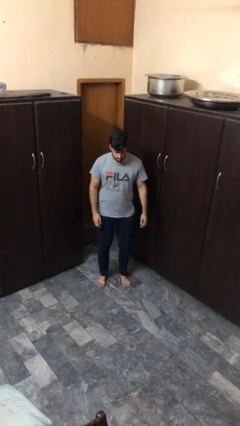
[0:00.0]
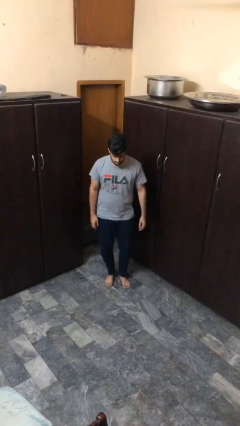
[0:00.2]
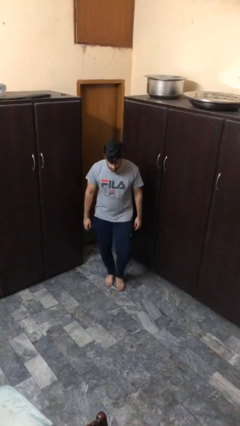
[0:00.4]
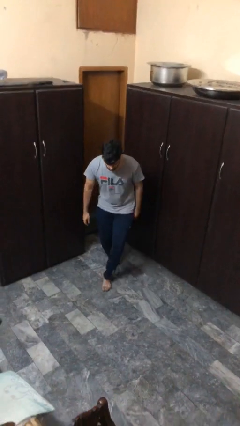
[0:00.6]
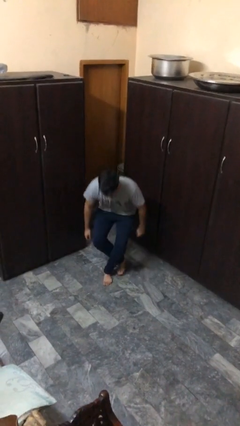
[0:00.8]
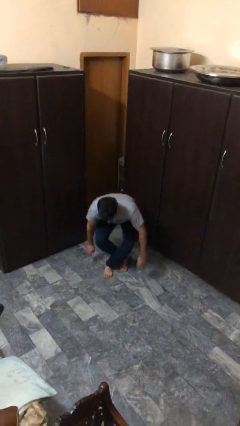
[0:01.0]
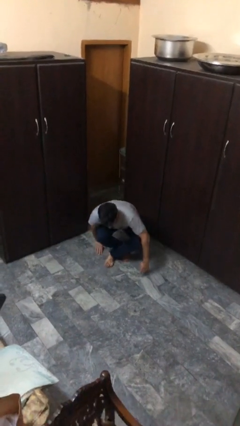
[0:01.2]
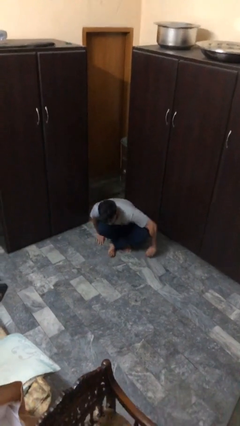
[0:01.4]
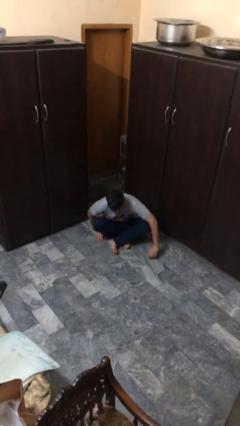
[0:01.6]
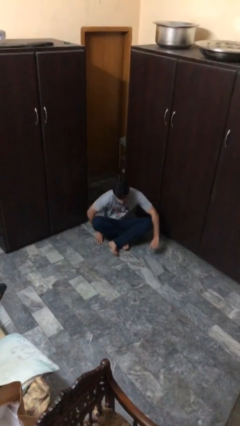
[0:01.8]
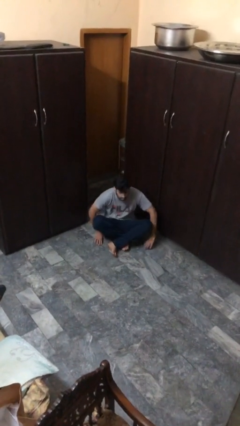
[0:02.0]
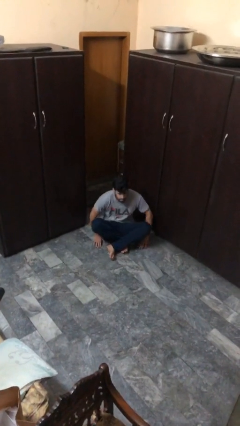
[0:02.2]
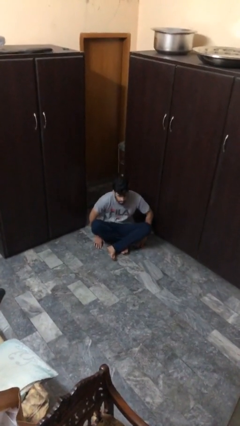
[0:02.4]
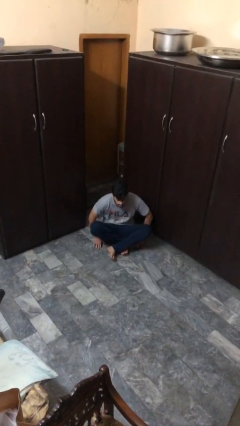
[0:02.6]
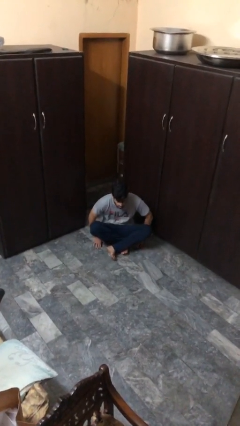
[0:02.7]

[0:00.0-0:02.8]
person sits crisscross

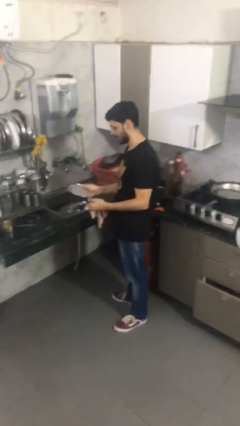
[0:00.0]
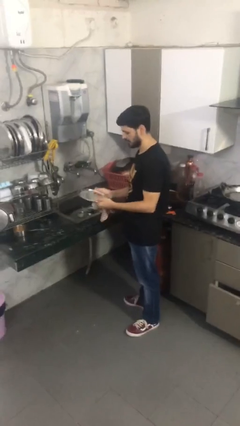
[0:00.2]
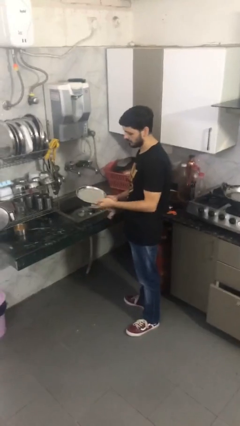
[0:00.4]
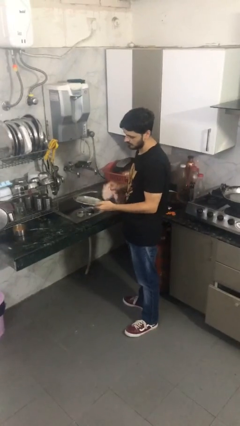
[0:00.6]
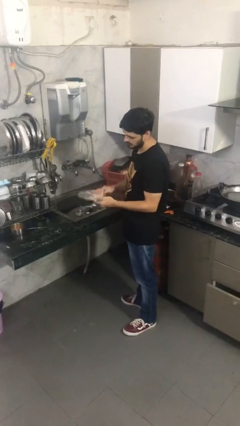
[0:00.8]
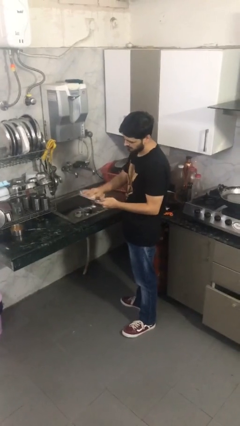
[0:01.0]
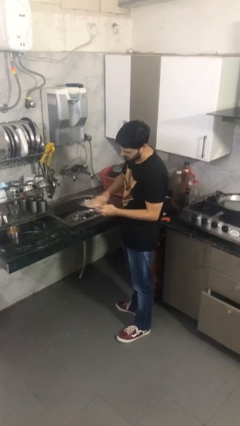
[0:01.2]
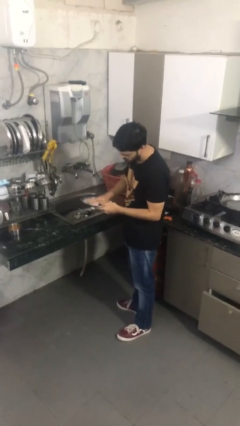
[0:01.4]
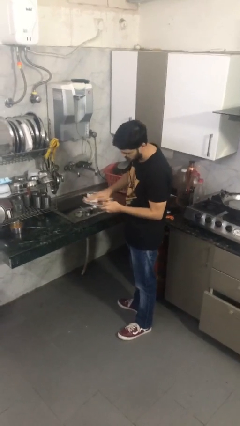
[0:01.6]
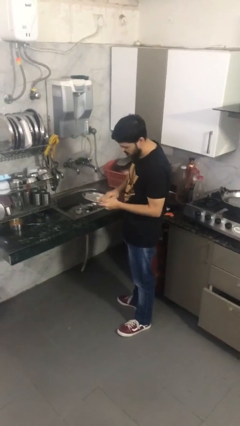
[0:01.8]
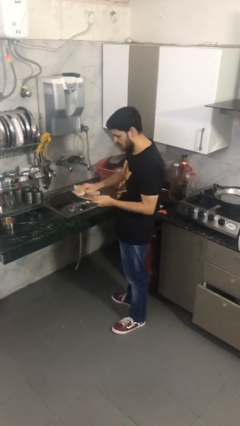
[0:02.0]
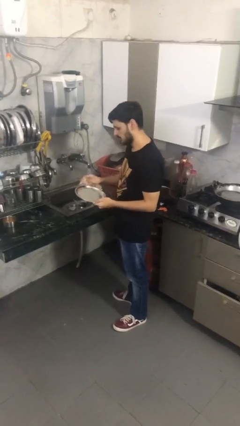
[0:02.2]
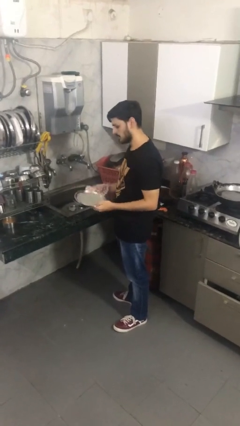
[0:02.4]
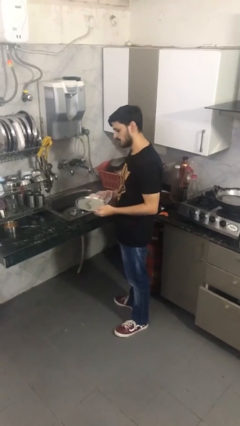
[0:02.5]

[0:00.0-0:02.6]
person dries dish

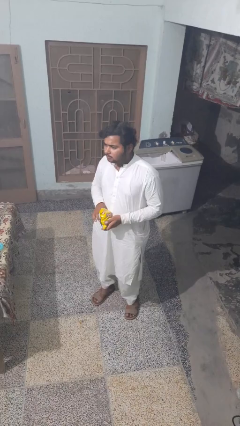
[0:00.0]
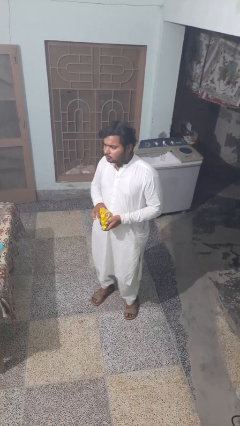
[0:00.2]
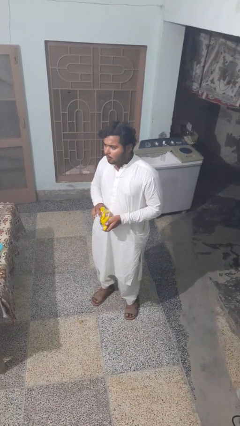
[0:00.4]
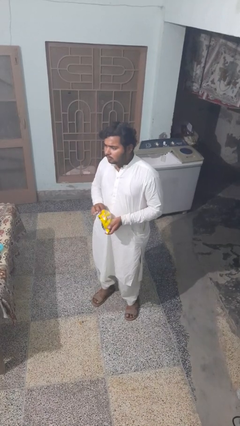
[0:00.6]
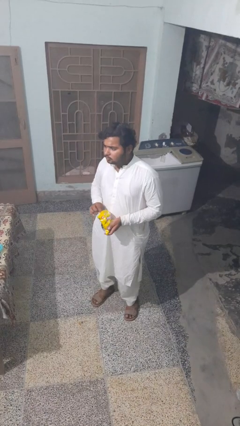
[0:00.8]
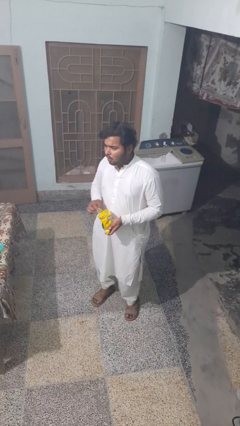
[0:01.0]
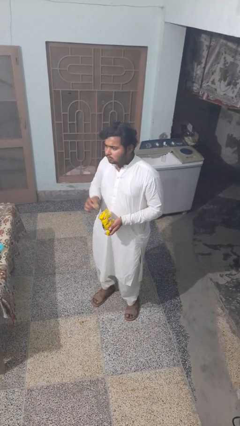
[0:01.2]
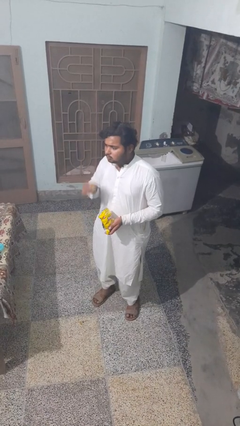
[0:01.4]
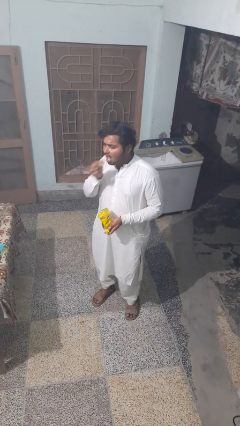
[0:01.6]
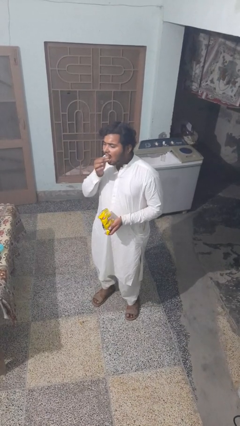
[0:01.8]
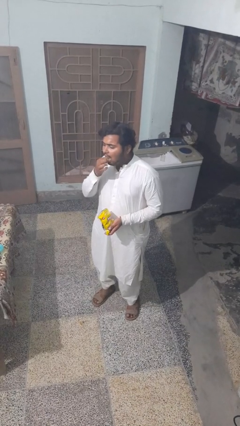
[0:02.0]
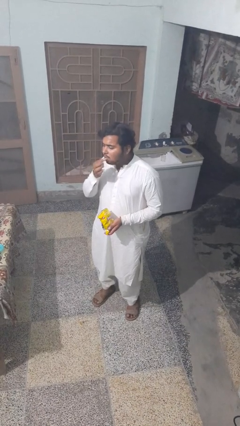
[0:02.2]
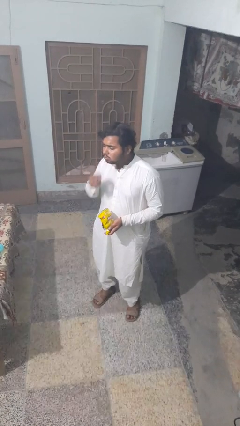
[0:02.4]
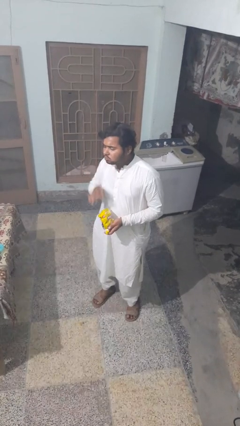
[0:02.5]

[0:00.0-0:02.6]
person eats snack from bag

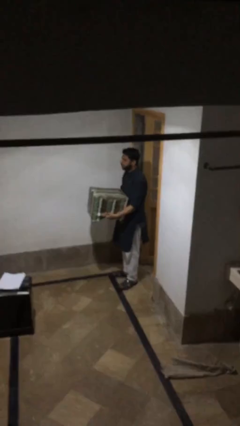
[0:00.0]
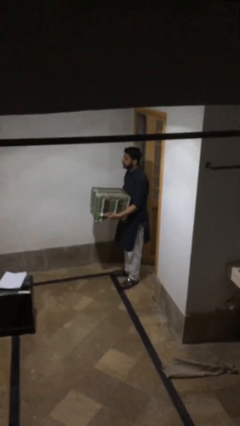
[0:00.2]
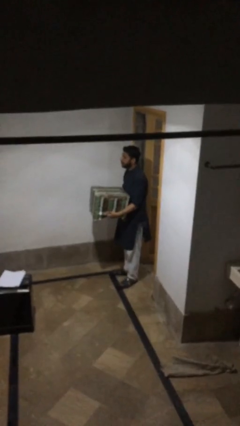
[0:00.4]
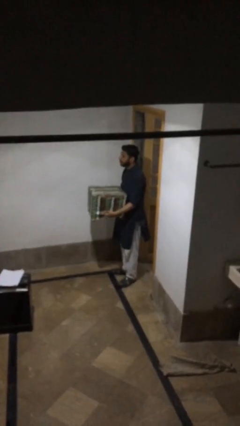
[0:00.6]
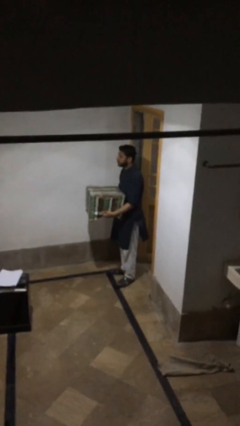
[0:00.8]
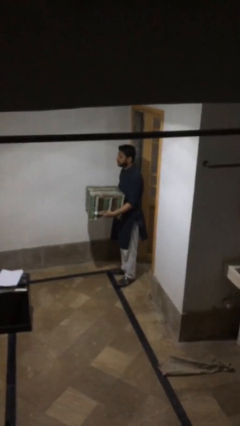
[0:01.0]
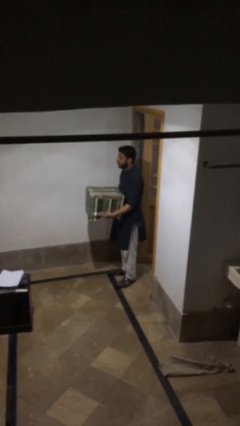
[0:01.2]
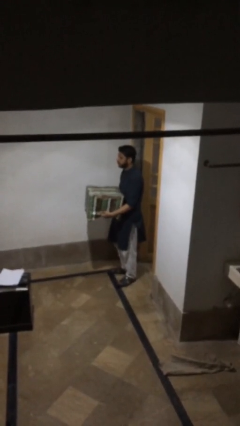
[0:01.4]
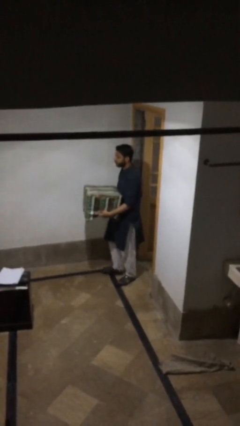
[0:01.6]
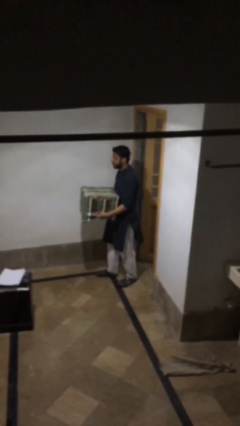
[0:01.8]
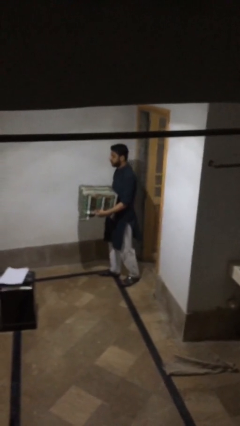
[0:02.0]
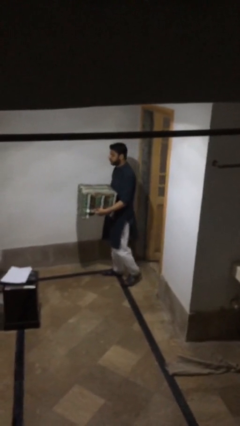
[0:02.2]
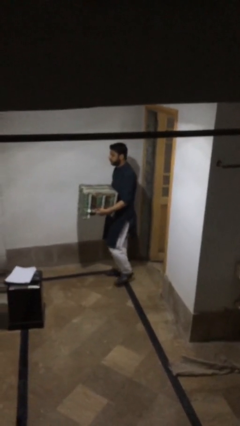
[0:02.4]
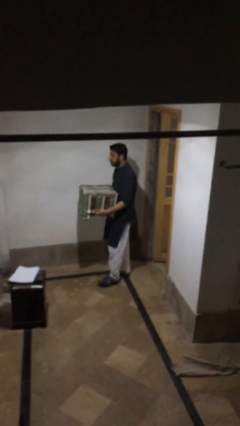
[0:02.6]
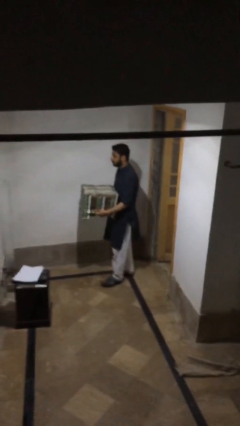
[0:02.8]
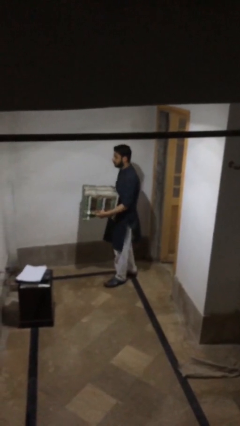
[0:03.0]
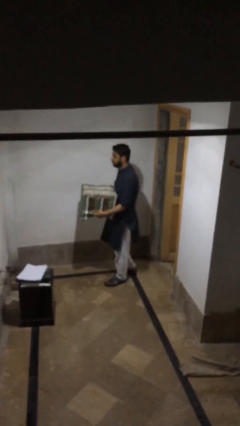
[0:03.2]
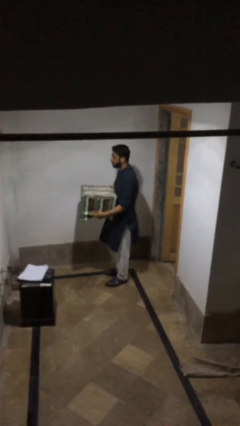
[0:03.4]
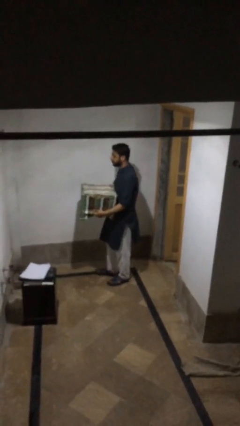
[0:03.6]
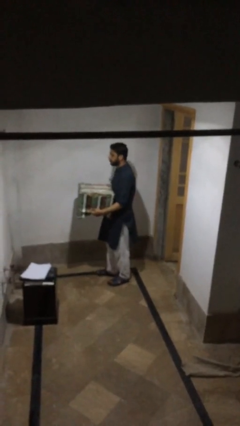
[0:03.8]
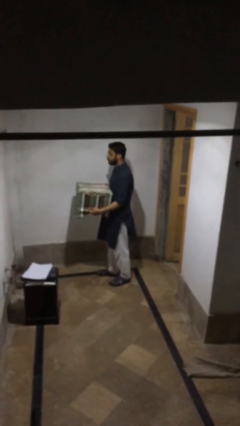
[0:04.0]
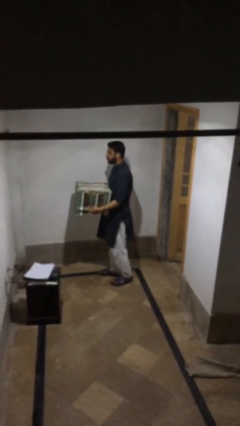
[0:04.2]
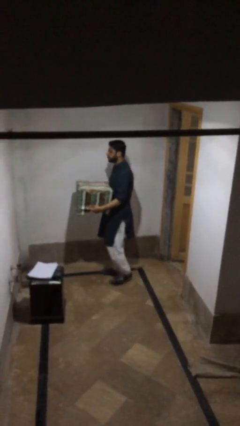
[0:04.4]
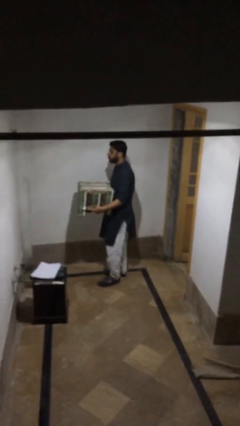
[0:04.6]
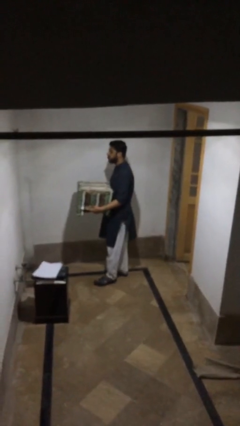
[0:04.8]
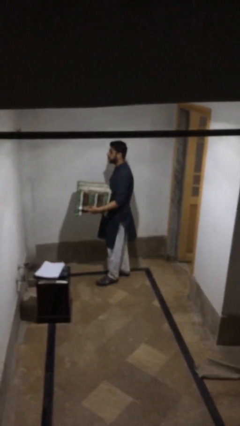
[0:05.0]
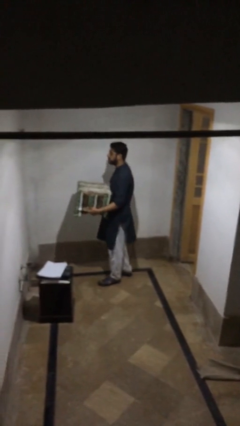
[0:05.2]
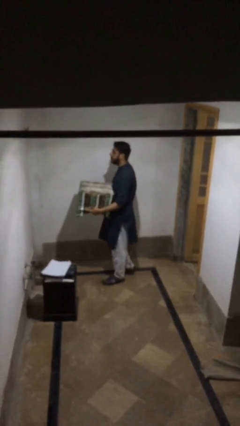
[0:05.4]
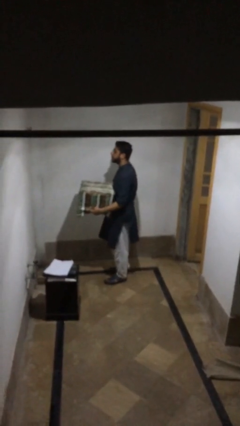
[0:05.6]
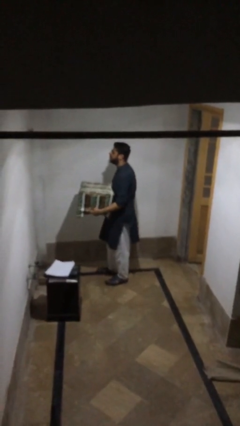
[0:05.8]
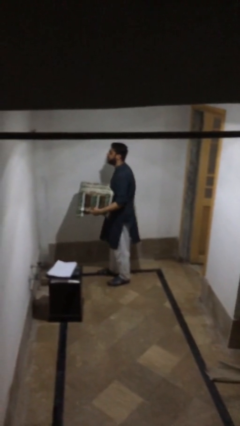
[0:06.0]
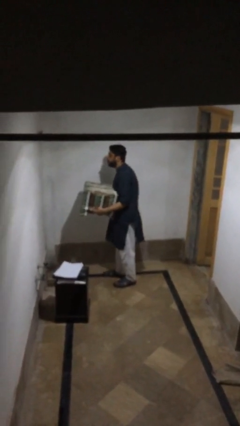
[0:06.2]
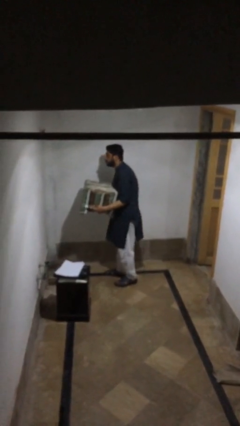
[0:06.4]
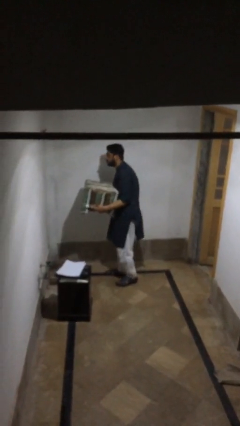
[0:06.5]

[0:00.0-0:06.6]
person carries heavy object

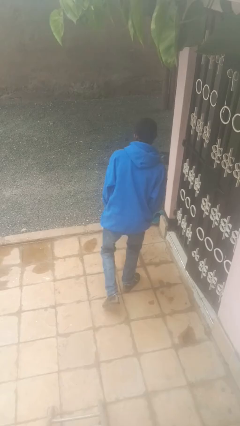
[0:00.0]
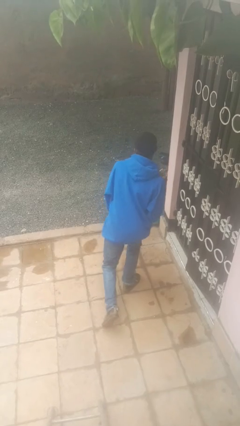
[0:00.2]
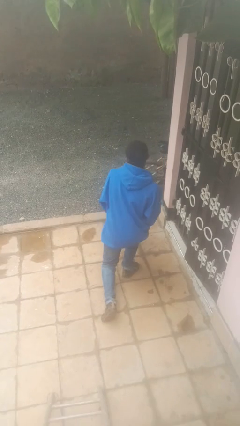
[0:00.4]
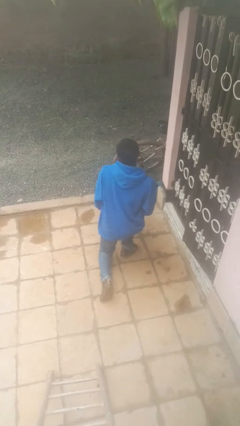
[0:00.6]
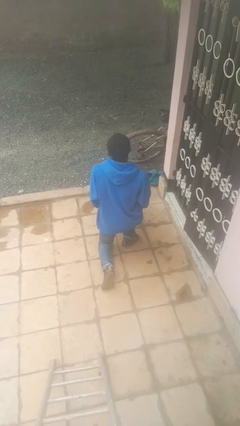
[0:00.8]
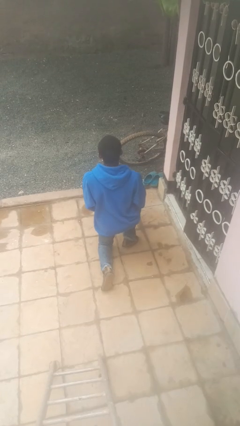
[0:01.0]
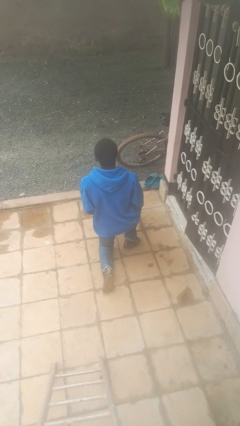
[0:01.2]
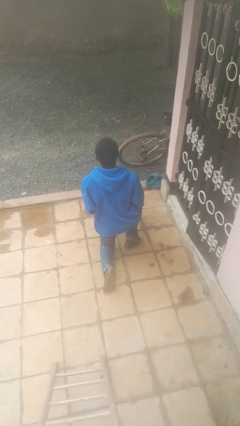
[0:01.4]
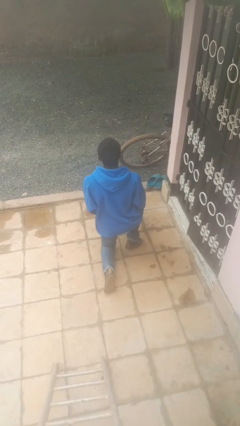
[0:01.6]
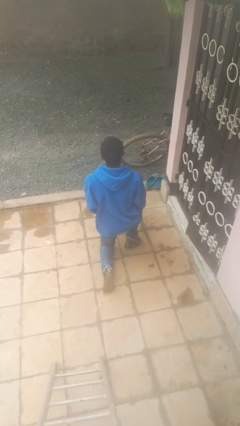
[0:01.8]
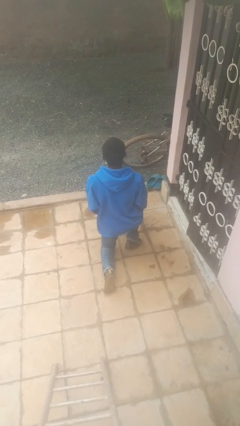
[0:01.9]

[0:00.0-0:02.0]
person kneels

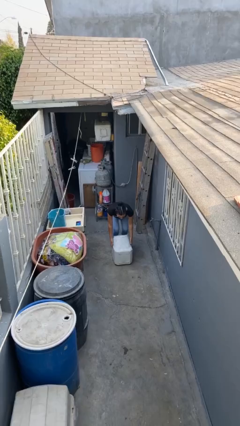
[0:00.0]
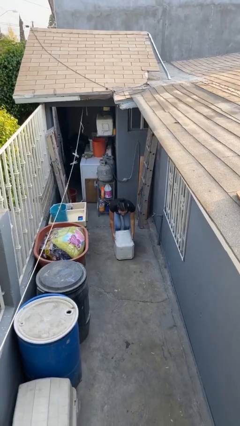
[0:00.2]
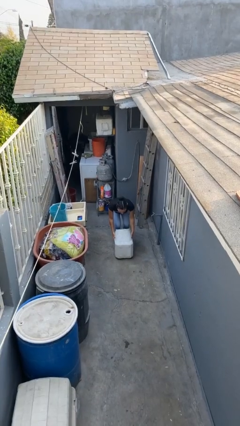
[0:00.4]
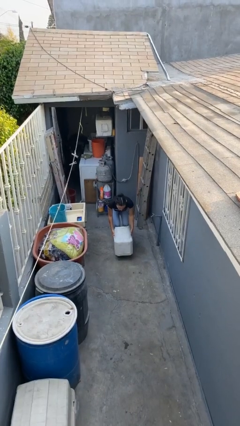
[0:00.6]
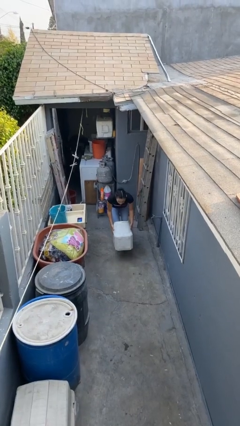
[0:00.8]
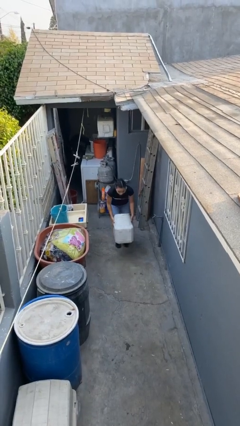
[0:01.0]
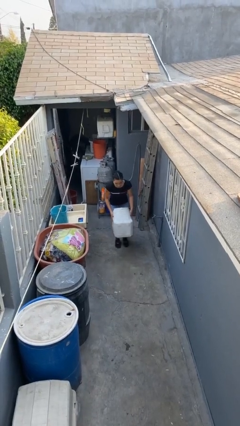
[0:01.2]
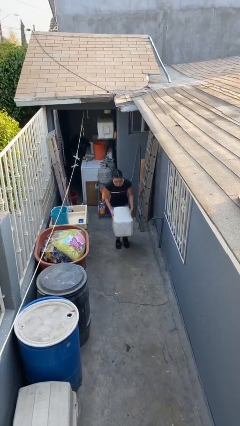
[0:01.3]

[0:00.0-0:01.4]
person picks up object from floor
